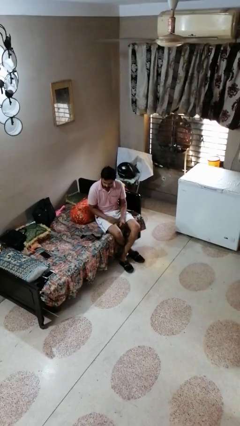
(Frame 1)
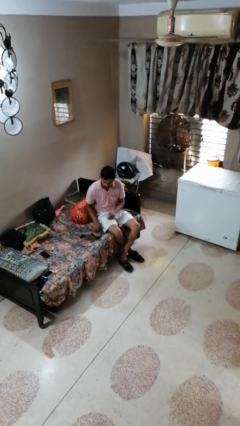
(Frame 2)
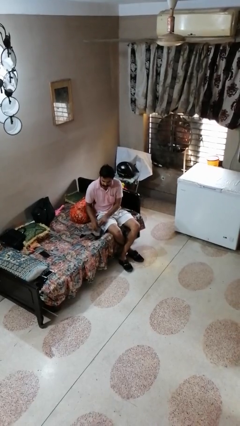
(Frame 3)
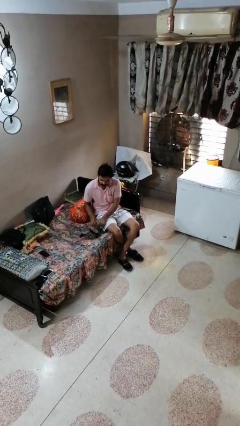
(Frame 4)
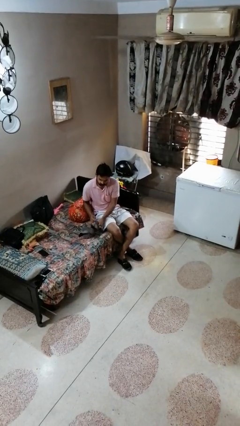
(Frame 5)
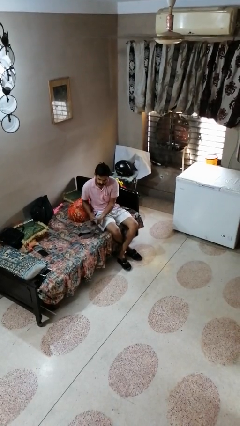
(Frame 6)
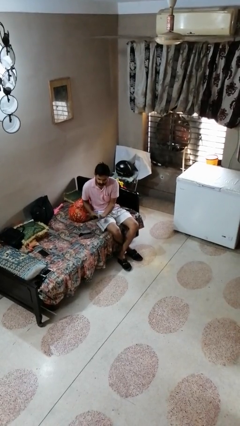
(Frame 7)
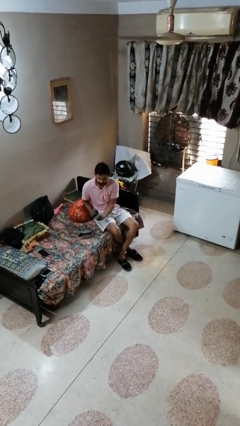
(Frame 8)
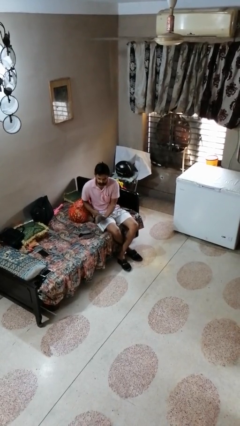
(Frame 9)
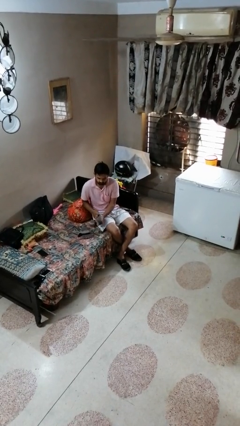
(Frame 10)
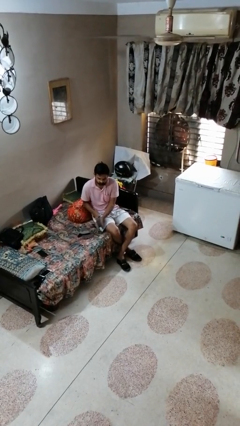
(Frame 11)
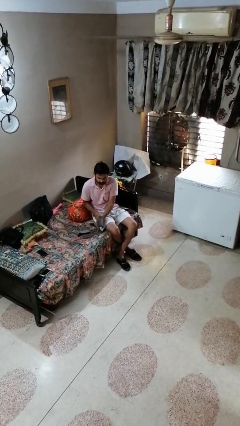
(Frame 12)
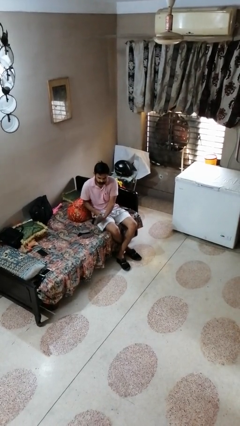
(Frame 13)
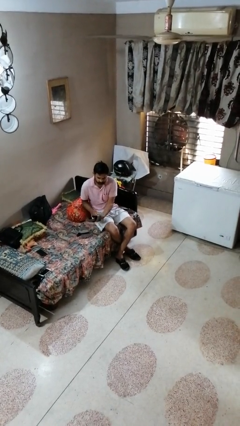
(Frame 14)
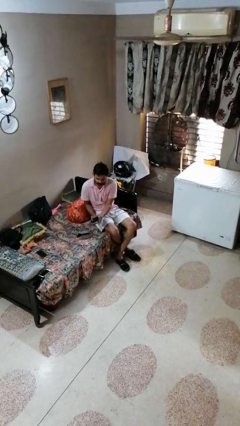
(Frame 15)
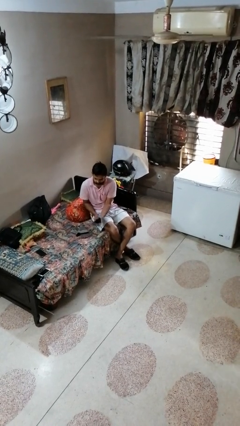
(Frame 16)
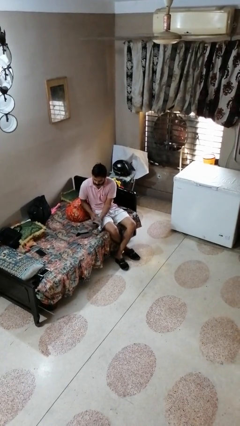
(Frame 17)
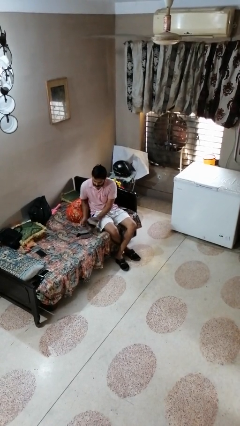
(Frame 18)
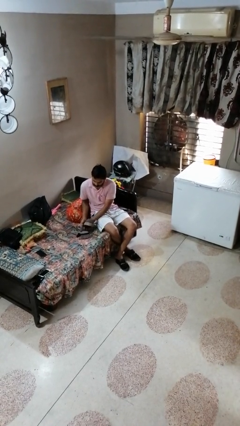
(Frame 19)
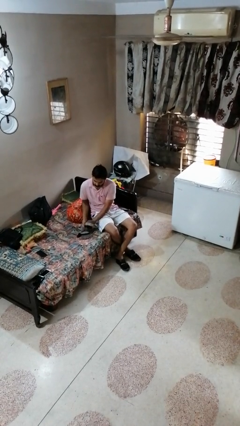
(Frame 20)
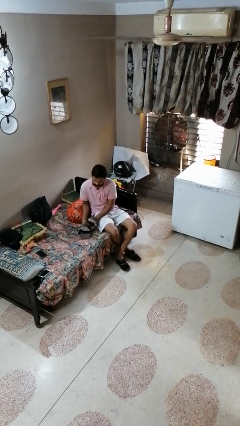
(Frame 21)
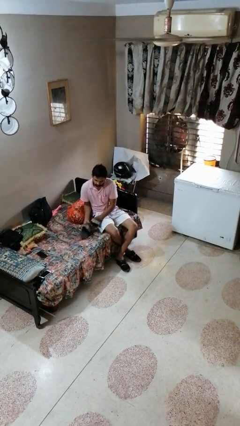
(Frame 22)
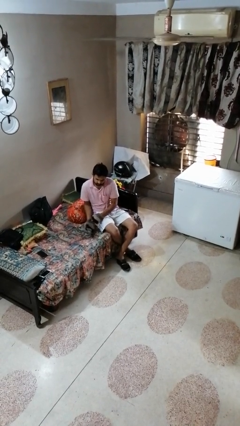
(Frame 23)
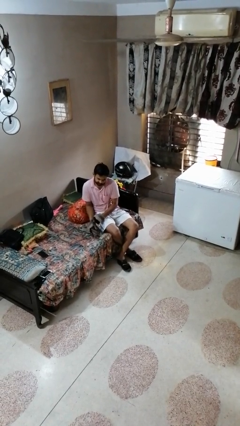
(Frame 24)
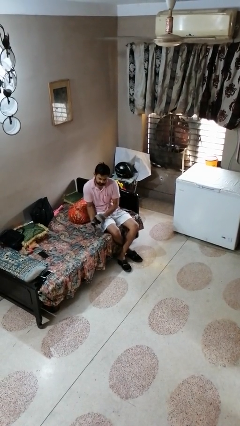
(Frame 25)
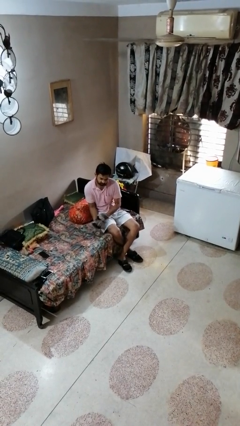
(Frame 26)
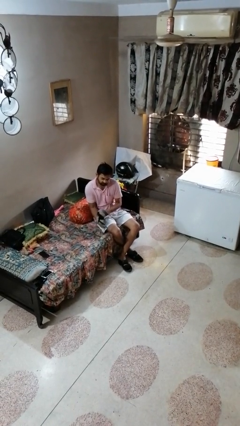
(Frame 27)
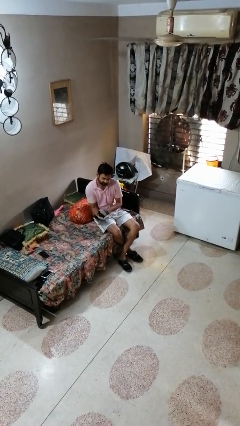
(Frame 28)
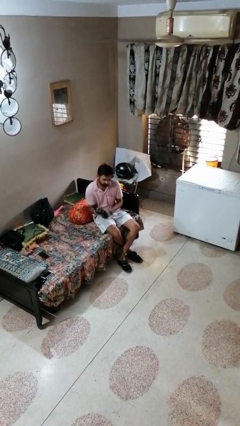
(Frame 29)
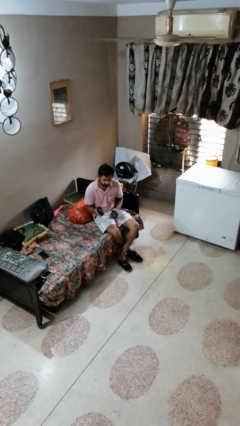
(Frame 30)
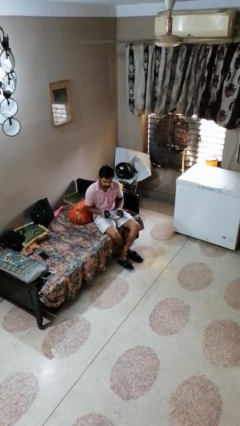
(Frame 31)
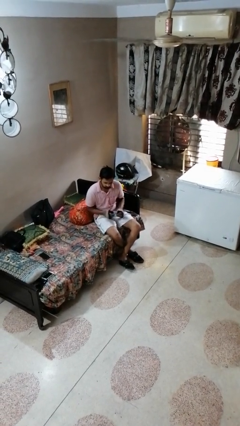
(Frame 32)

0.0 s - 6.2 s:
person puts on gloves

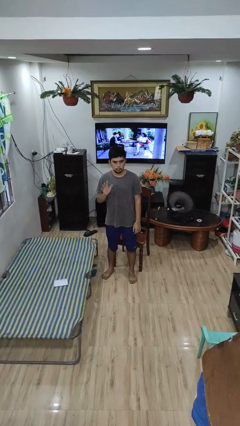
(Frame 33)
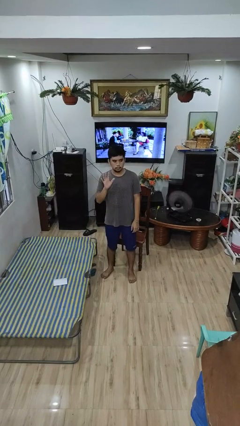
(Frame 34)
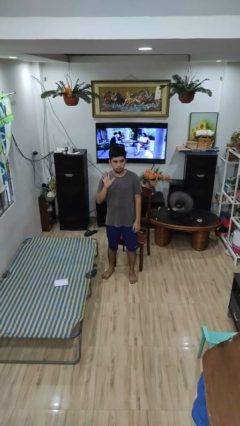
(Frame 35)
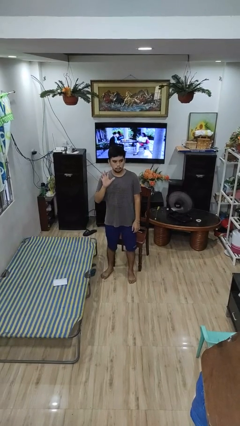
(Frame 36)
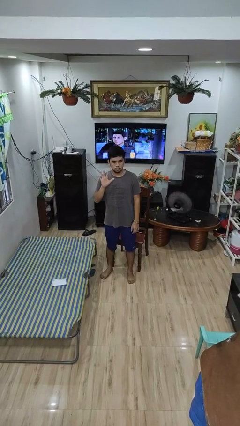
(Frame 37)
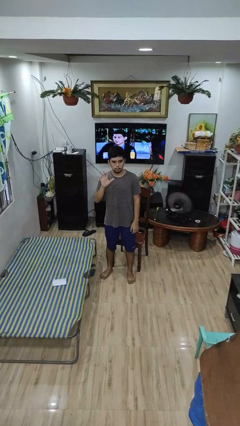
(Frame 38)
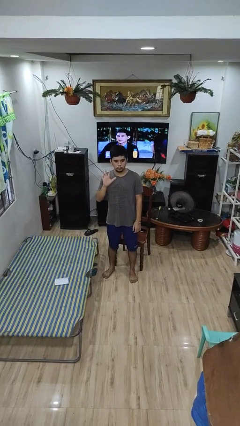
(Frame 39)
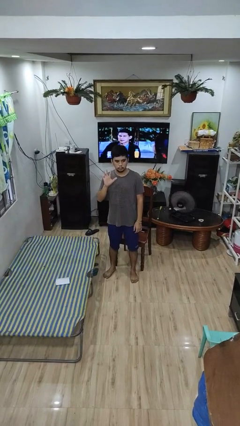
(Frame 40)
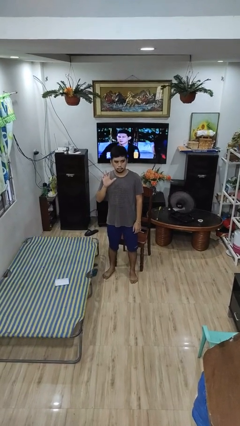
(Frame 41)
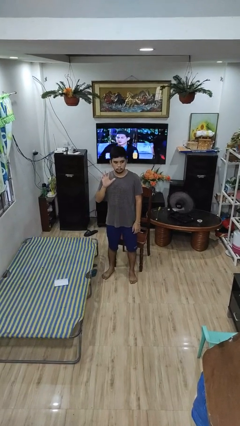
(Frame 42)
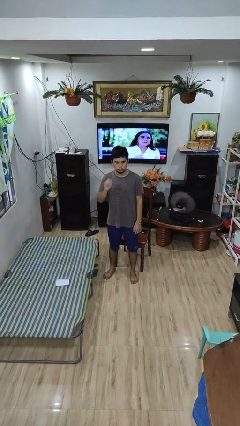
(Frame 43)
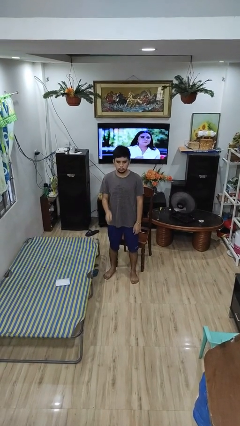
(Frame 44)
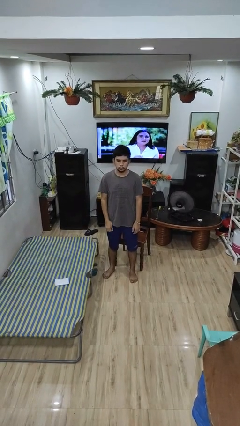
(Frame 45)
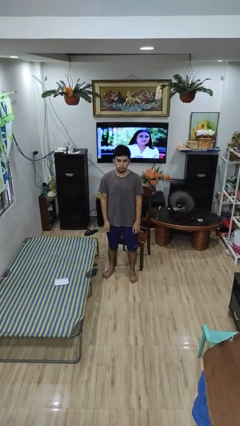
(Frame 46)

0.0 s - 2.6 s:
person gestures number five

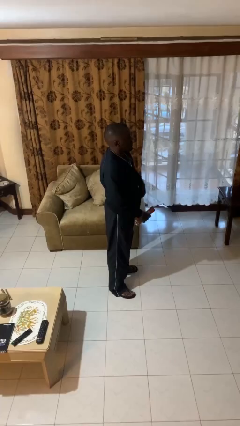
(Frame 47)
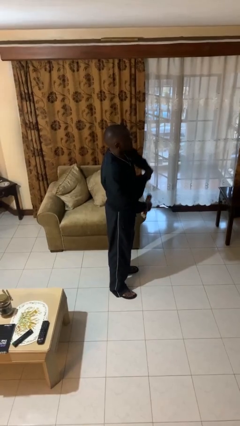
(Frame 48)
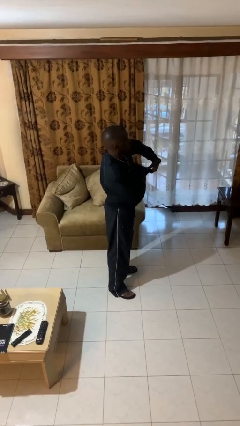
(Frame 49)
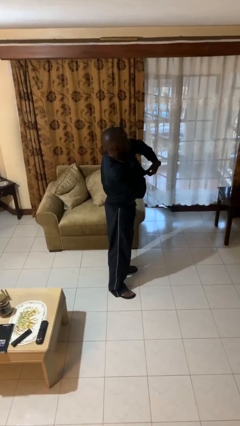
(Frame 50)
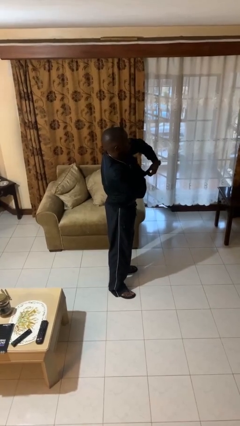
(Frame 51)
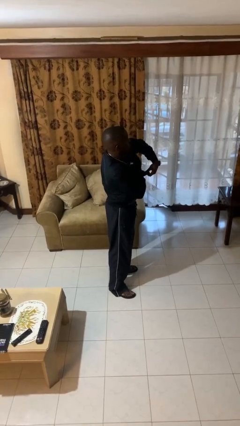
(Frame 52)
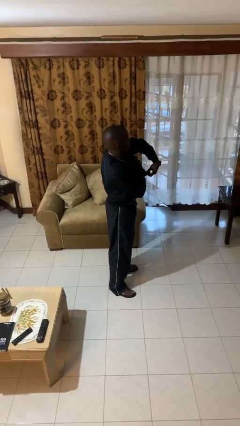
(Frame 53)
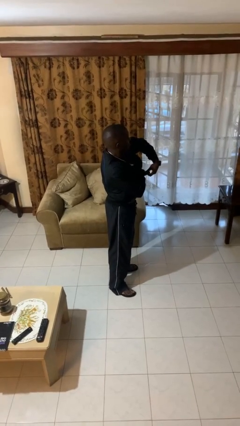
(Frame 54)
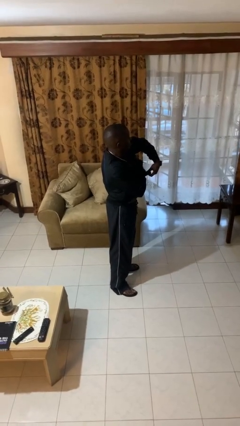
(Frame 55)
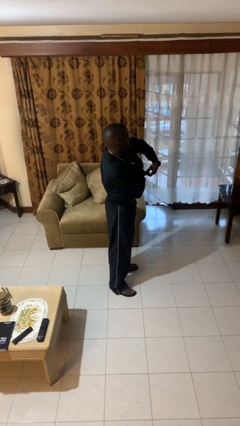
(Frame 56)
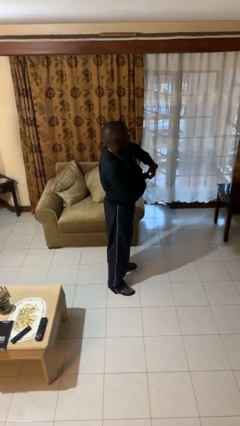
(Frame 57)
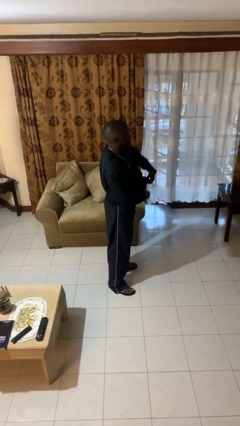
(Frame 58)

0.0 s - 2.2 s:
person applies deodorant

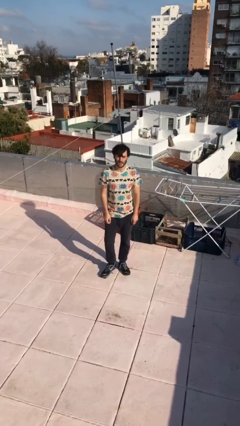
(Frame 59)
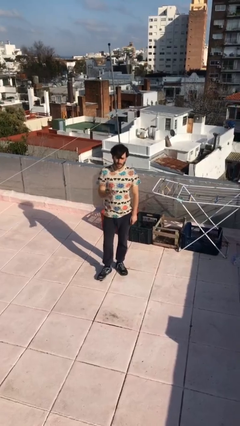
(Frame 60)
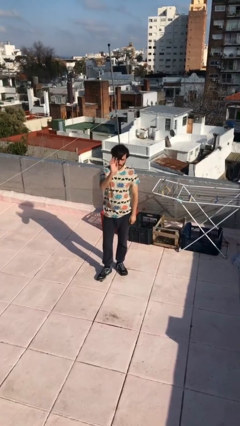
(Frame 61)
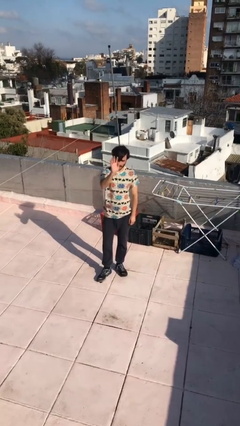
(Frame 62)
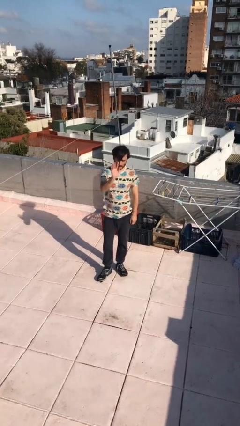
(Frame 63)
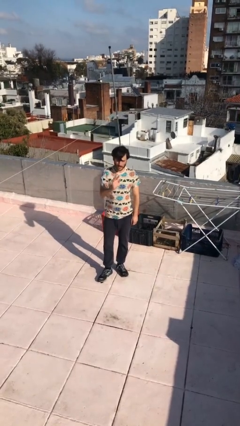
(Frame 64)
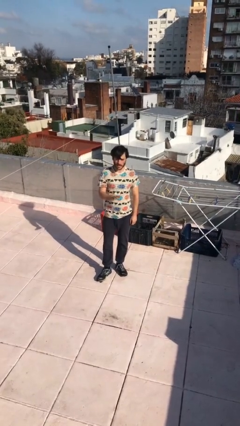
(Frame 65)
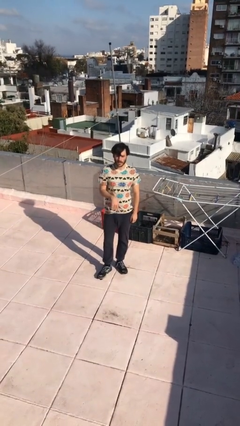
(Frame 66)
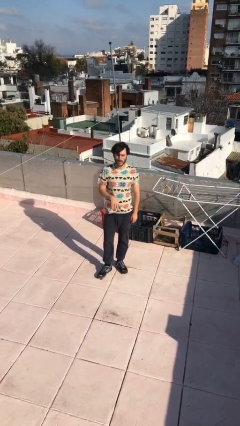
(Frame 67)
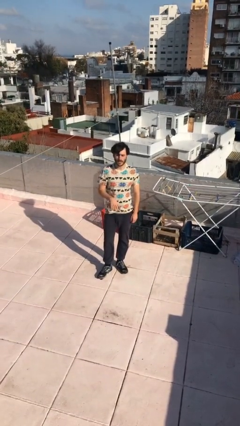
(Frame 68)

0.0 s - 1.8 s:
person gestures swipe down

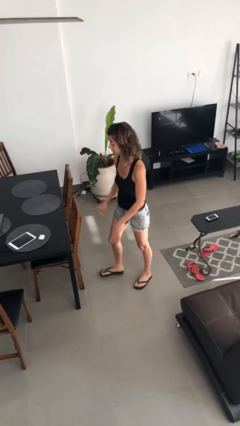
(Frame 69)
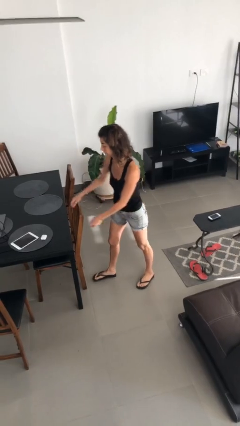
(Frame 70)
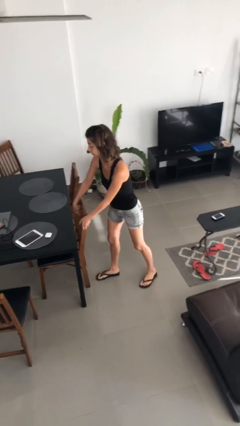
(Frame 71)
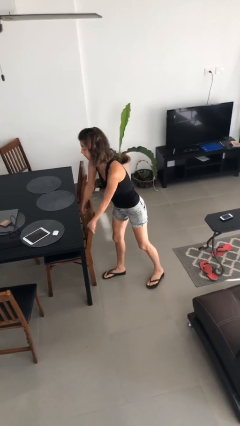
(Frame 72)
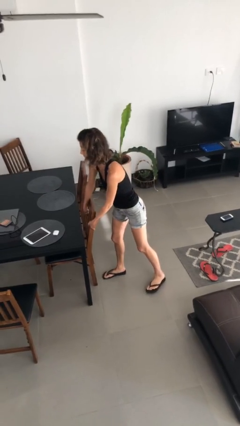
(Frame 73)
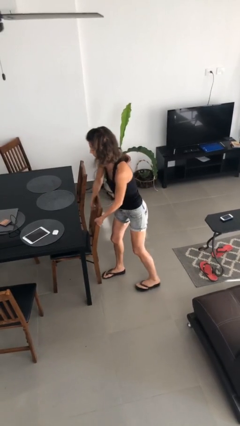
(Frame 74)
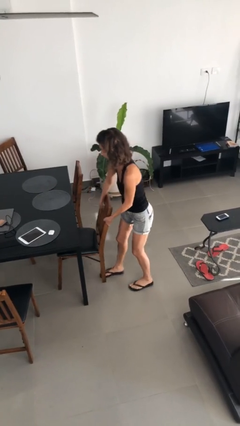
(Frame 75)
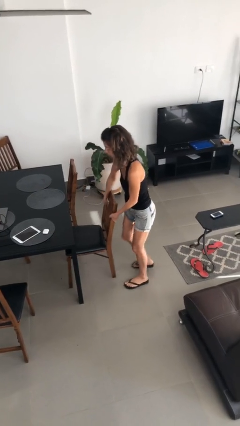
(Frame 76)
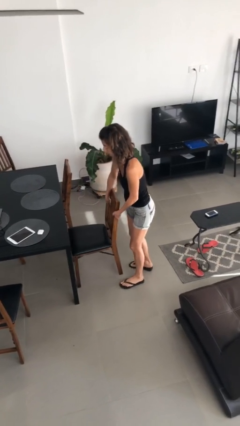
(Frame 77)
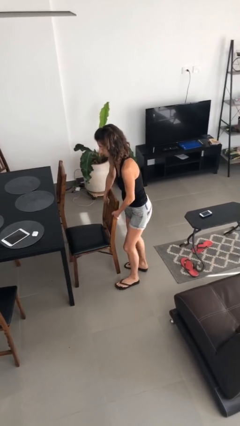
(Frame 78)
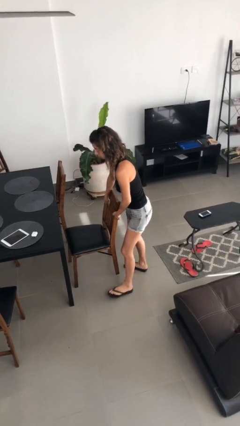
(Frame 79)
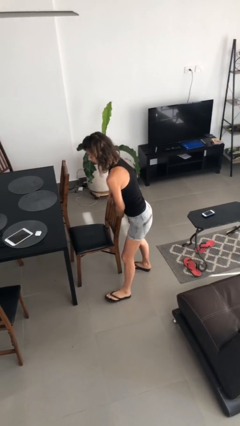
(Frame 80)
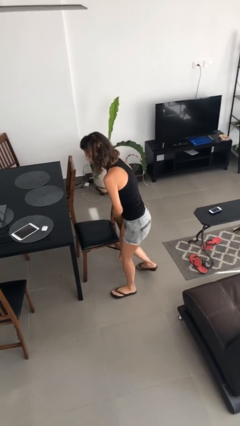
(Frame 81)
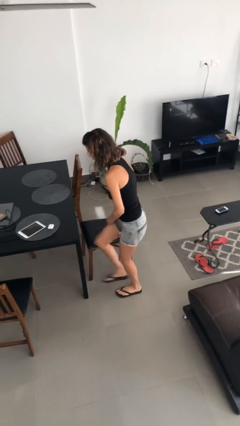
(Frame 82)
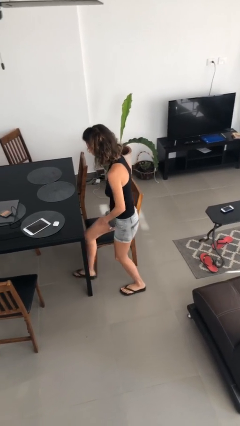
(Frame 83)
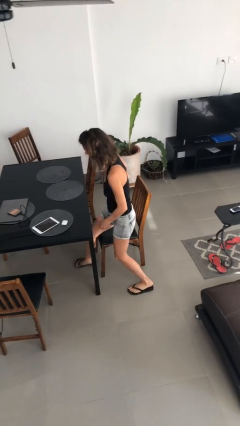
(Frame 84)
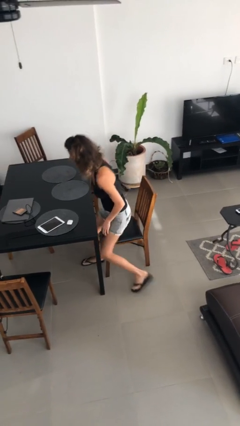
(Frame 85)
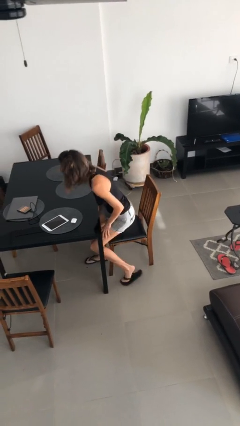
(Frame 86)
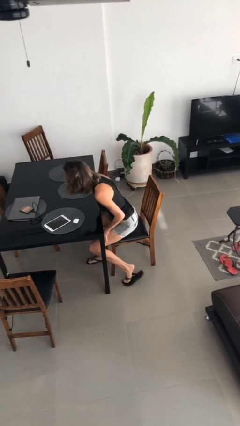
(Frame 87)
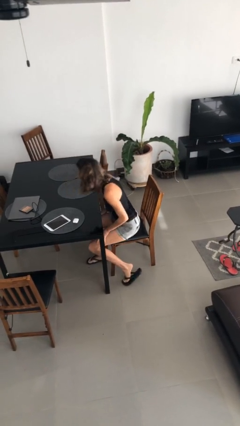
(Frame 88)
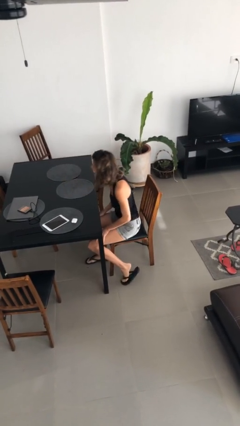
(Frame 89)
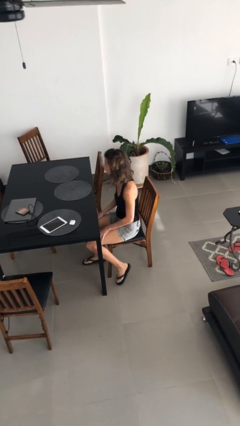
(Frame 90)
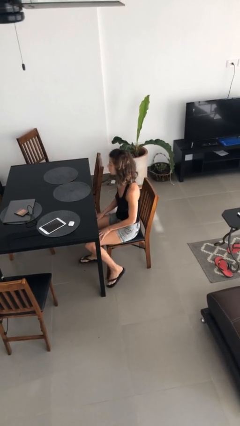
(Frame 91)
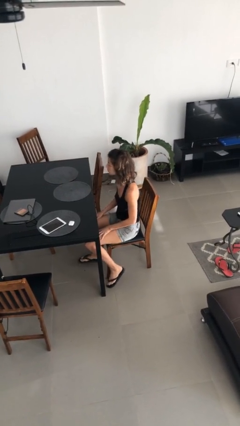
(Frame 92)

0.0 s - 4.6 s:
person sits down
